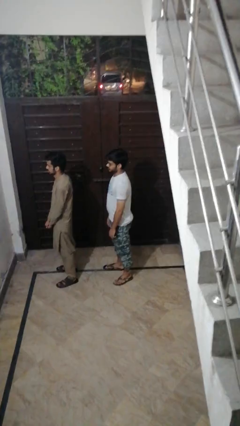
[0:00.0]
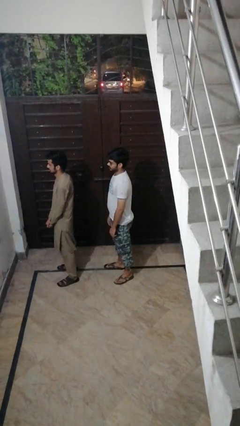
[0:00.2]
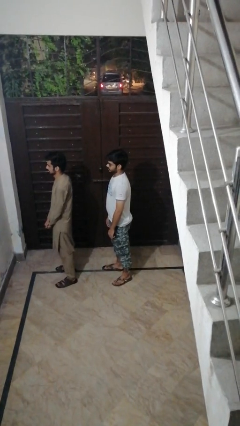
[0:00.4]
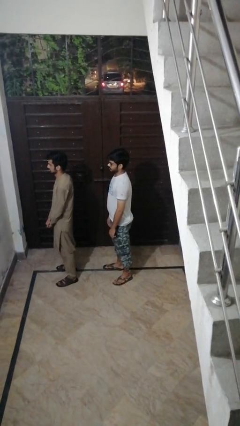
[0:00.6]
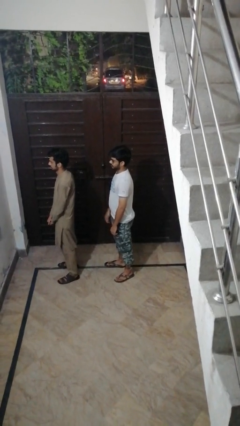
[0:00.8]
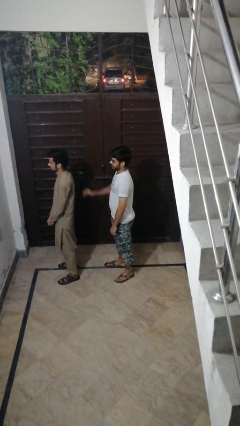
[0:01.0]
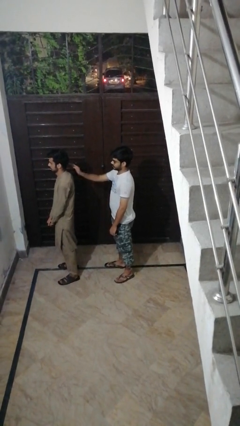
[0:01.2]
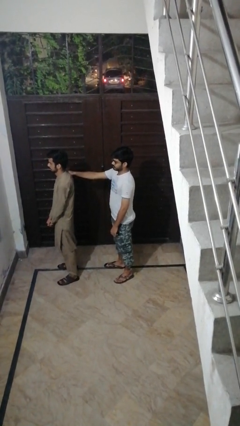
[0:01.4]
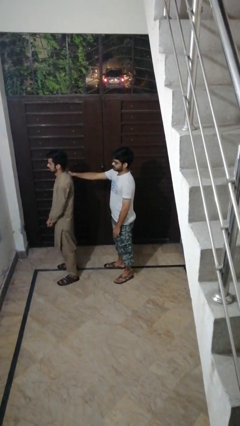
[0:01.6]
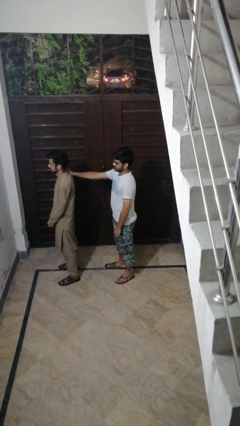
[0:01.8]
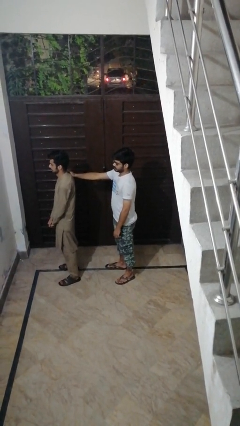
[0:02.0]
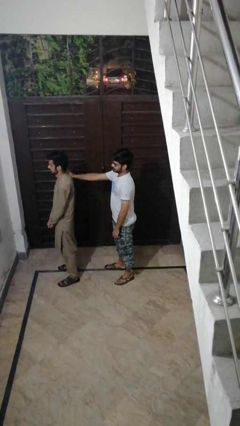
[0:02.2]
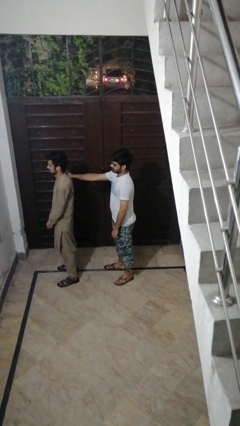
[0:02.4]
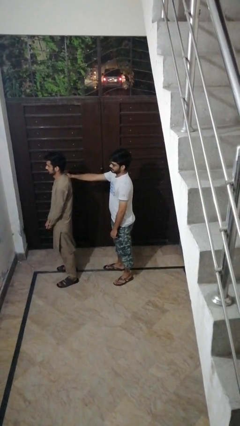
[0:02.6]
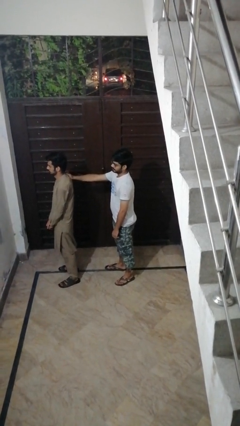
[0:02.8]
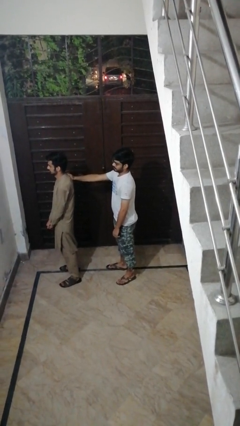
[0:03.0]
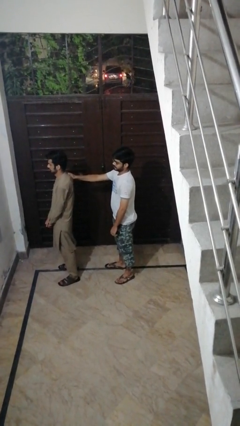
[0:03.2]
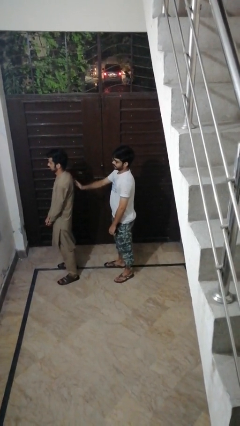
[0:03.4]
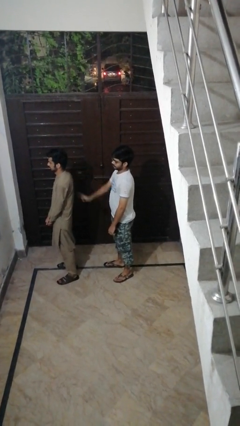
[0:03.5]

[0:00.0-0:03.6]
person touches back of person

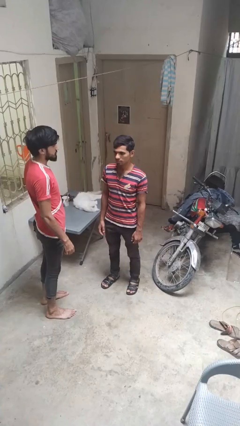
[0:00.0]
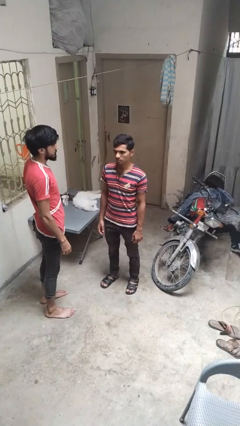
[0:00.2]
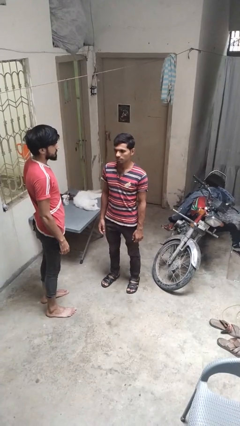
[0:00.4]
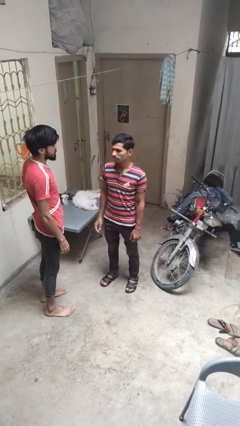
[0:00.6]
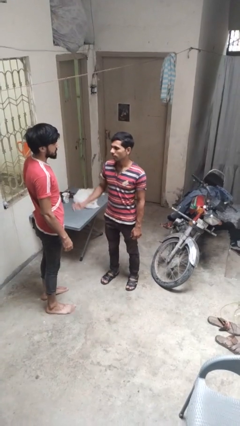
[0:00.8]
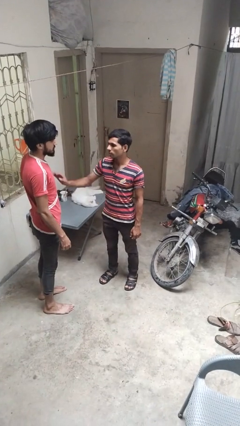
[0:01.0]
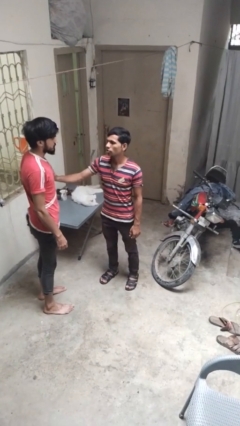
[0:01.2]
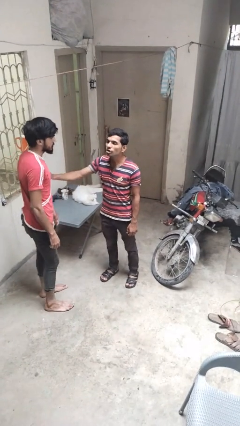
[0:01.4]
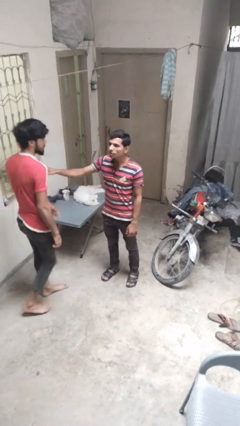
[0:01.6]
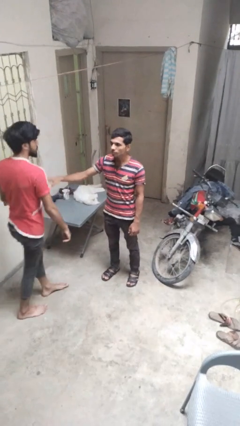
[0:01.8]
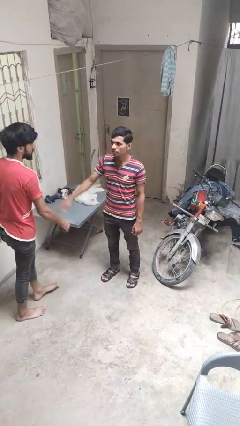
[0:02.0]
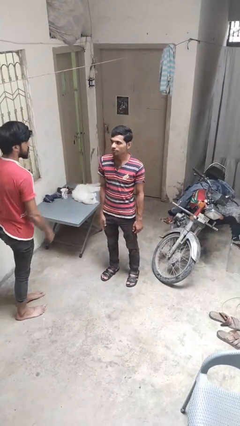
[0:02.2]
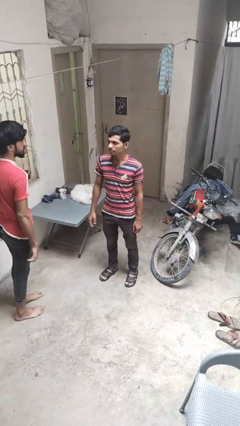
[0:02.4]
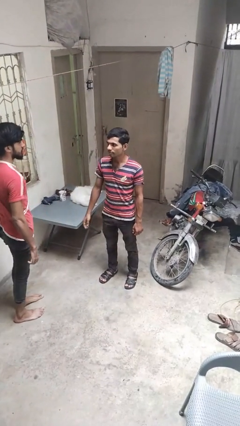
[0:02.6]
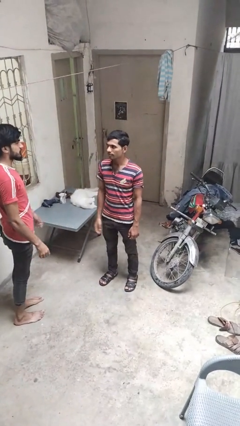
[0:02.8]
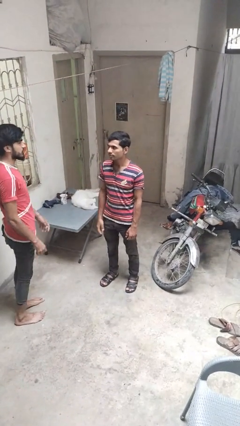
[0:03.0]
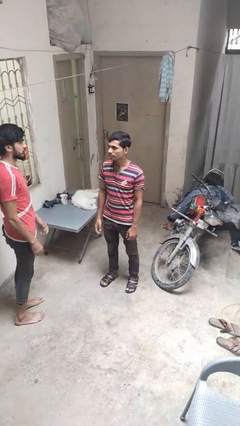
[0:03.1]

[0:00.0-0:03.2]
person shoves person

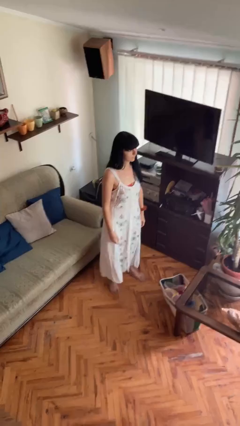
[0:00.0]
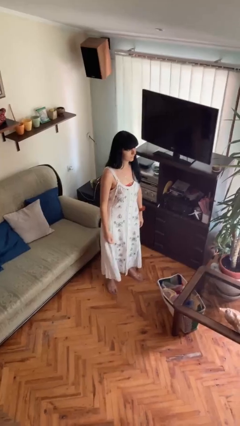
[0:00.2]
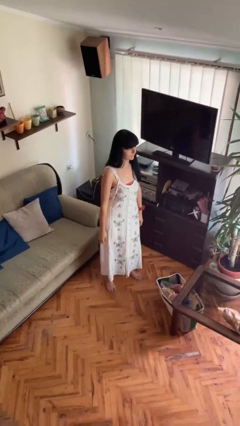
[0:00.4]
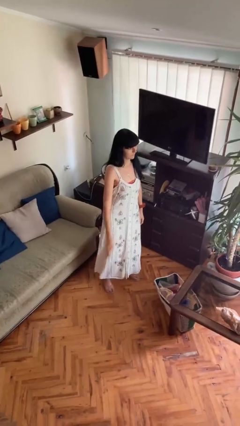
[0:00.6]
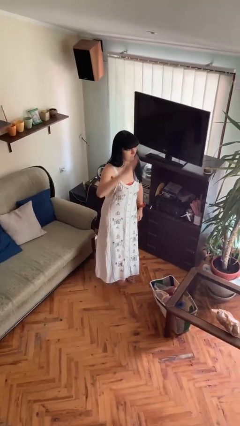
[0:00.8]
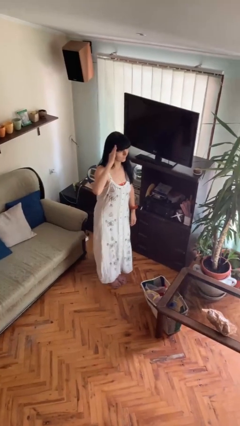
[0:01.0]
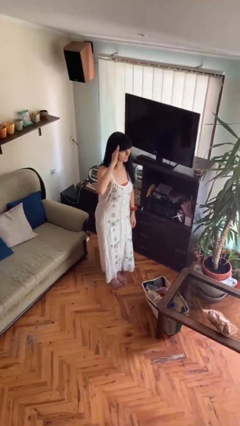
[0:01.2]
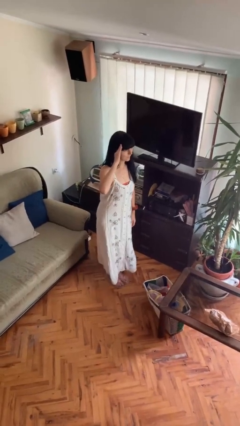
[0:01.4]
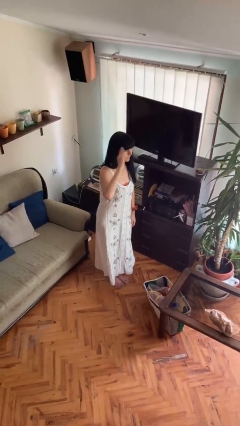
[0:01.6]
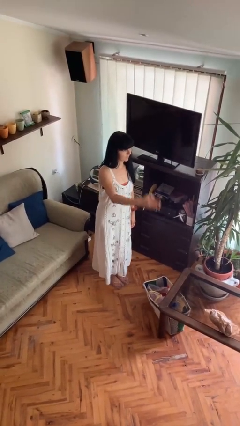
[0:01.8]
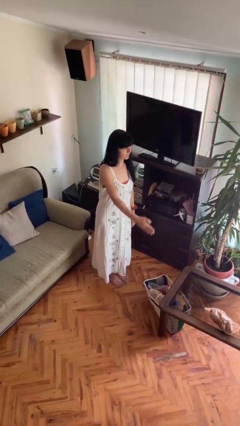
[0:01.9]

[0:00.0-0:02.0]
person salutes

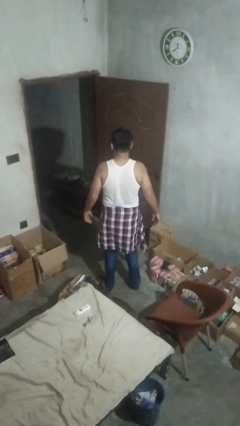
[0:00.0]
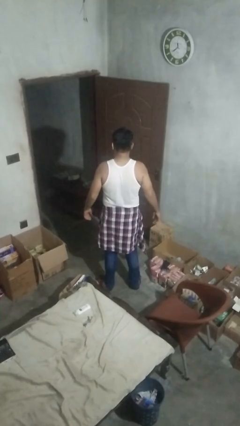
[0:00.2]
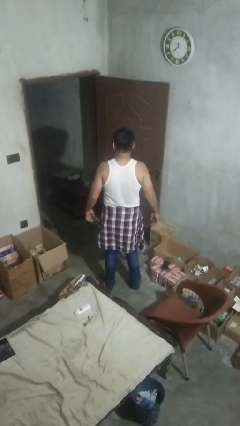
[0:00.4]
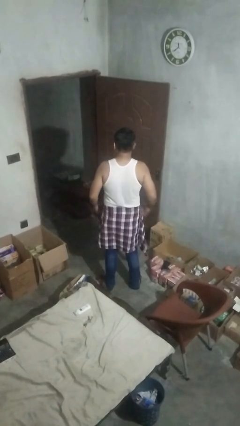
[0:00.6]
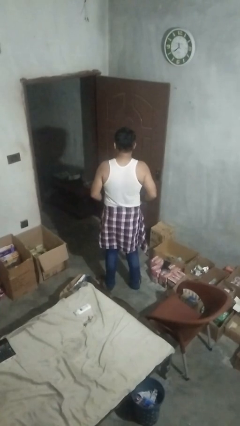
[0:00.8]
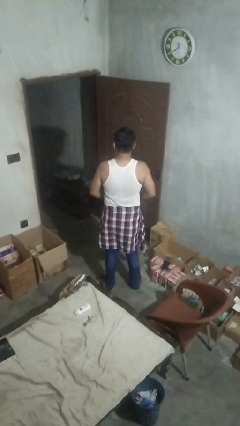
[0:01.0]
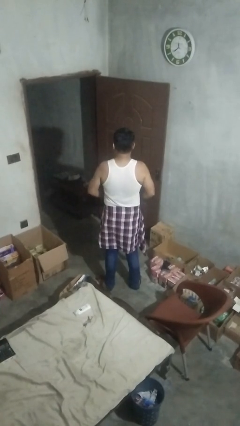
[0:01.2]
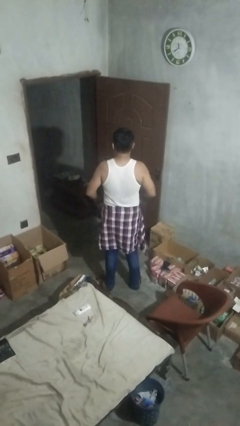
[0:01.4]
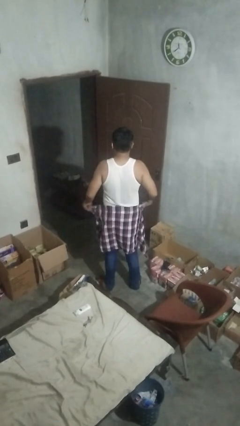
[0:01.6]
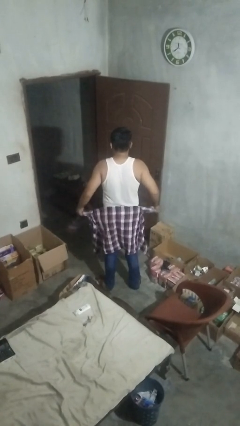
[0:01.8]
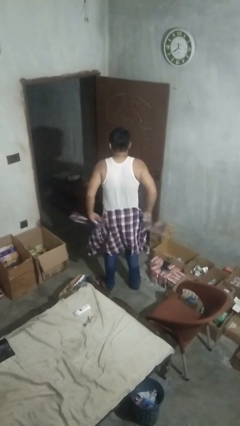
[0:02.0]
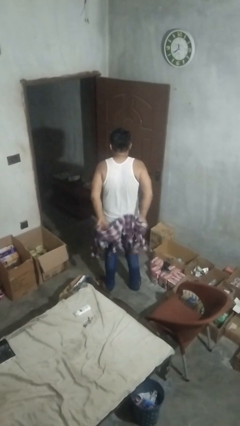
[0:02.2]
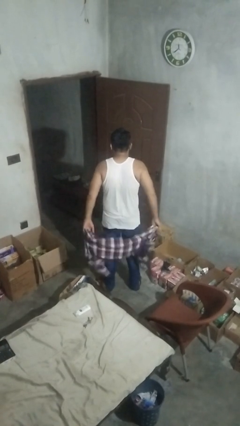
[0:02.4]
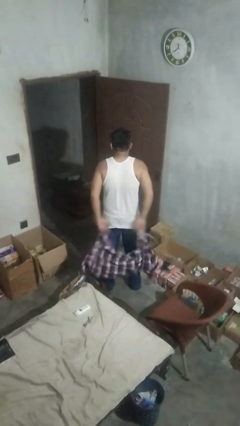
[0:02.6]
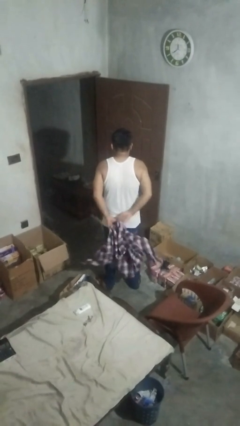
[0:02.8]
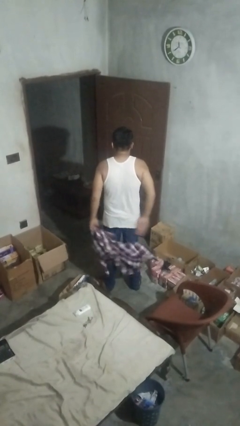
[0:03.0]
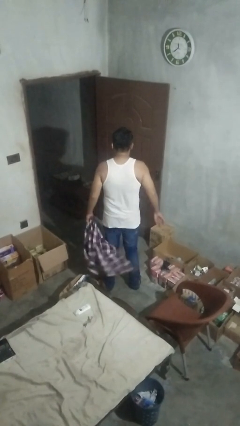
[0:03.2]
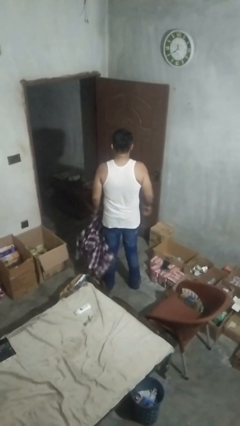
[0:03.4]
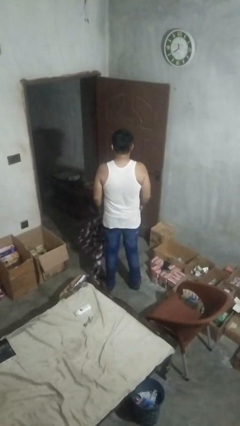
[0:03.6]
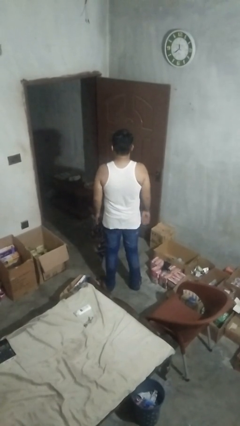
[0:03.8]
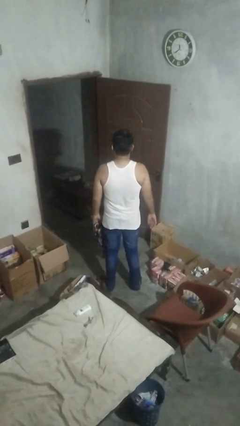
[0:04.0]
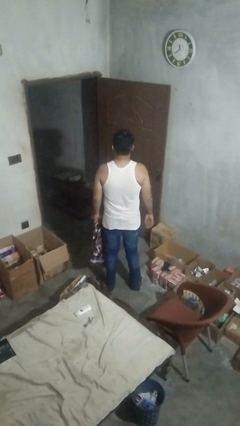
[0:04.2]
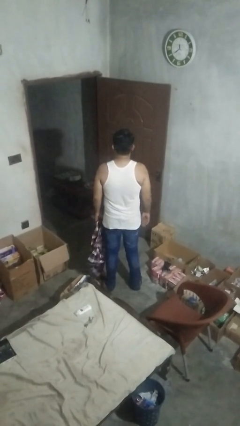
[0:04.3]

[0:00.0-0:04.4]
person unties jacket around waist

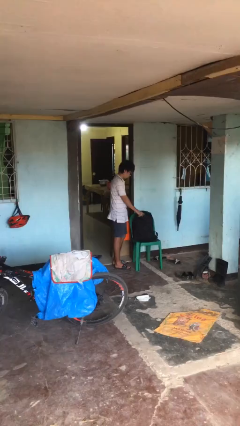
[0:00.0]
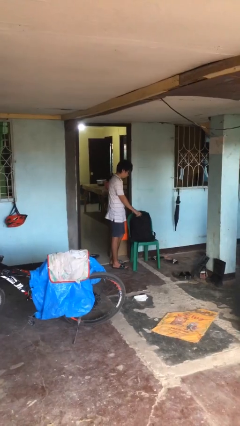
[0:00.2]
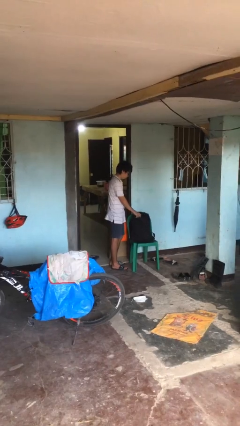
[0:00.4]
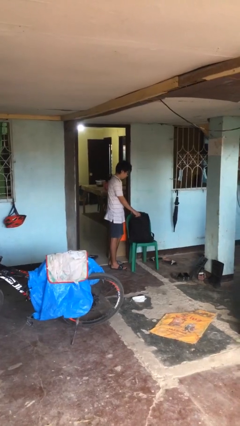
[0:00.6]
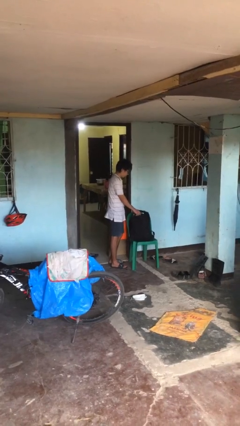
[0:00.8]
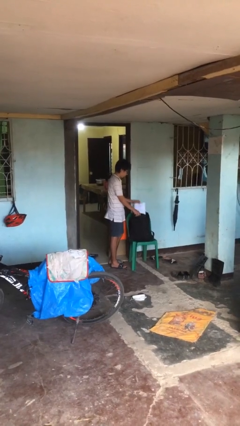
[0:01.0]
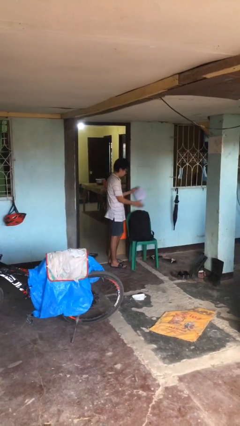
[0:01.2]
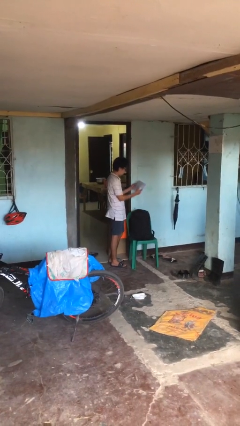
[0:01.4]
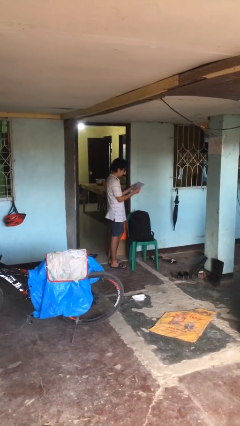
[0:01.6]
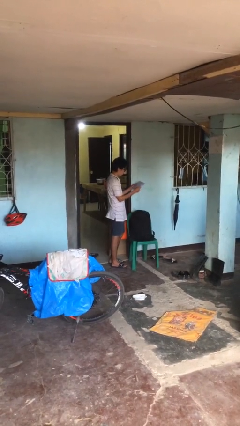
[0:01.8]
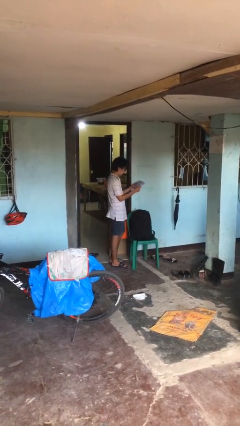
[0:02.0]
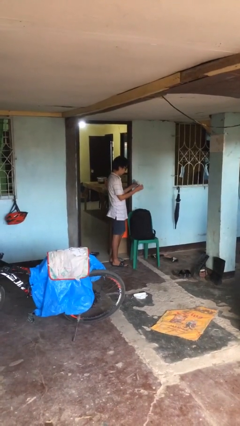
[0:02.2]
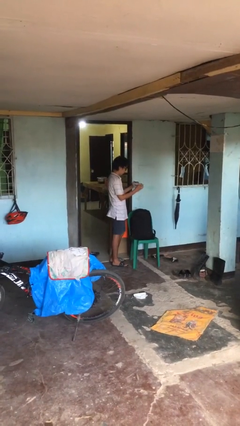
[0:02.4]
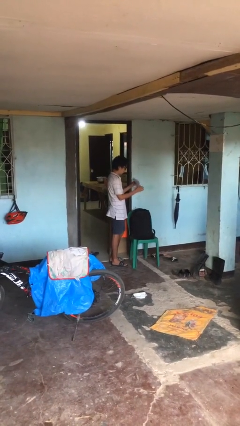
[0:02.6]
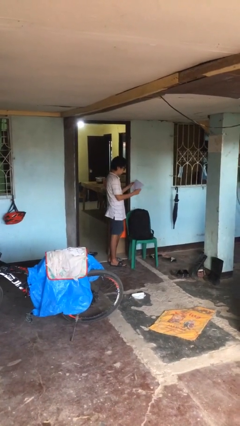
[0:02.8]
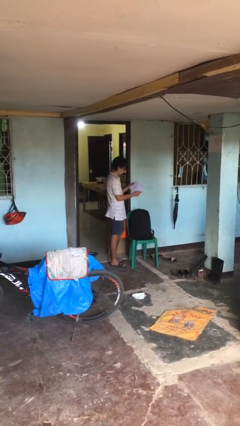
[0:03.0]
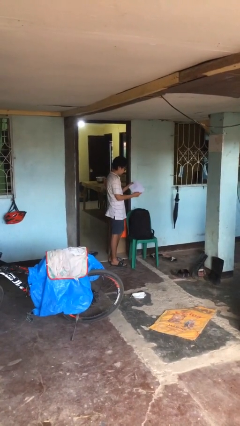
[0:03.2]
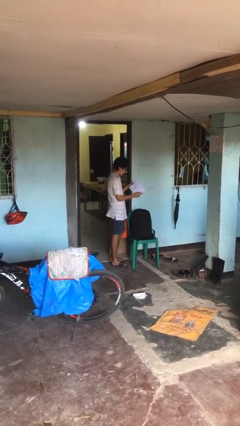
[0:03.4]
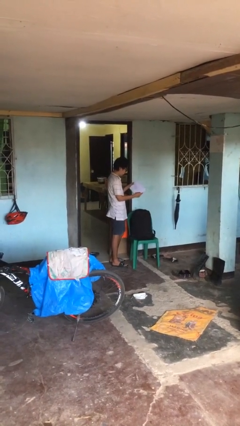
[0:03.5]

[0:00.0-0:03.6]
person takes object from backpack

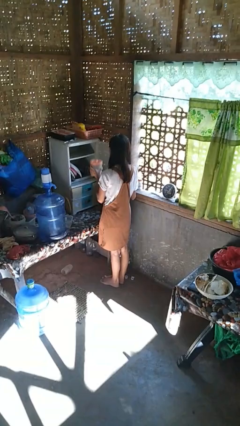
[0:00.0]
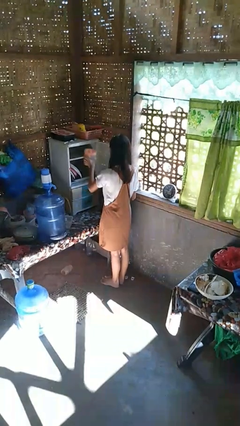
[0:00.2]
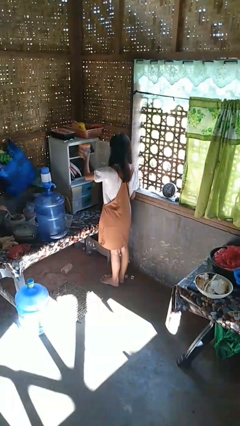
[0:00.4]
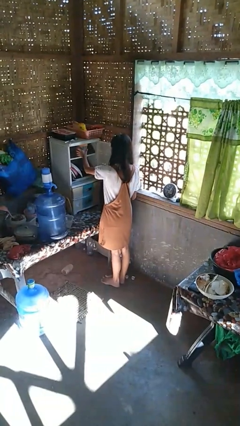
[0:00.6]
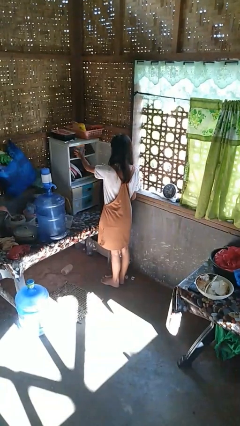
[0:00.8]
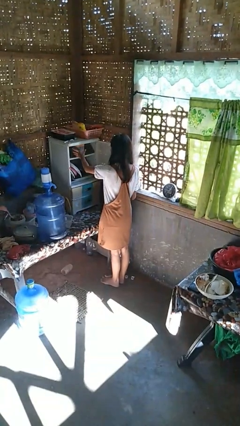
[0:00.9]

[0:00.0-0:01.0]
person puts down object into cabinet
